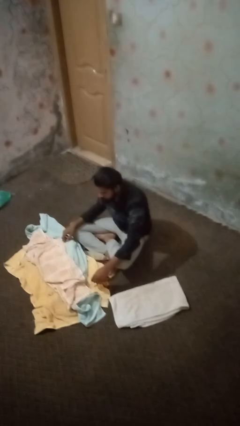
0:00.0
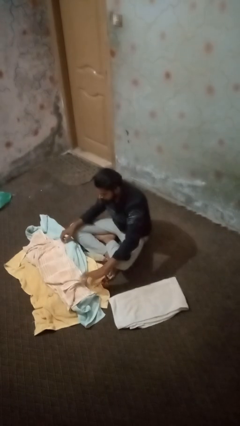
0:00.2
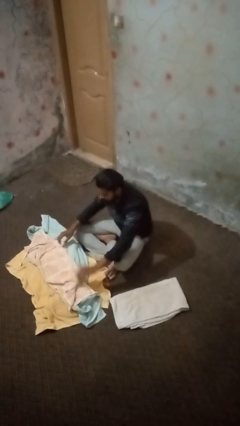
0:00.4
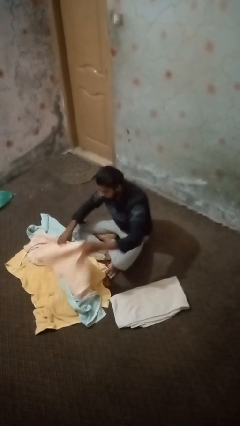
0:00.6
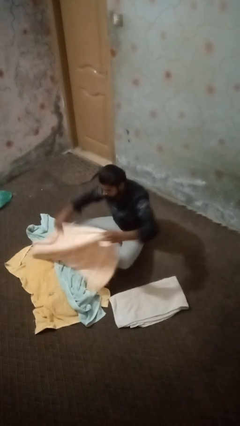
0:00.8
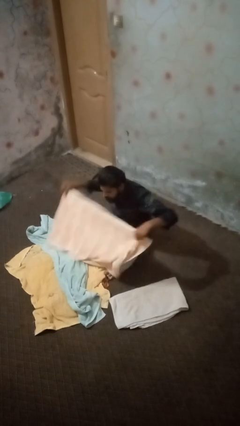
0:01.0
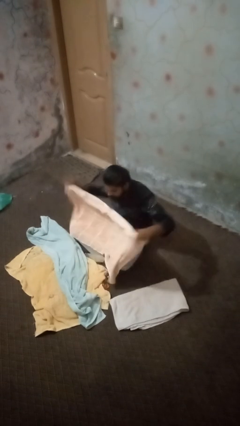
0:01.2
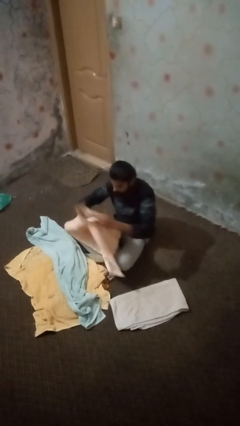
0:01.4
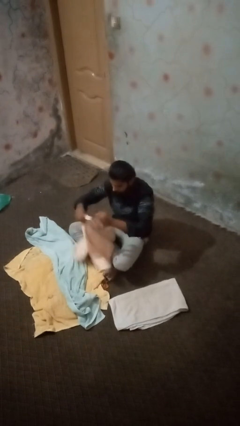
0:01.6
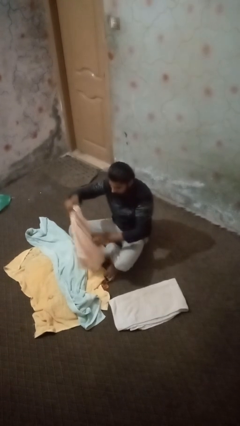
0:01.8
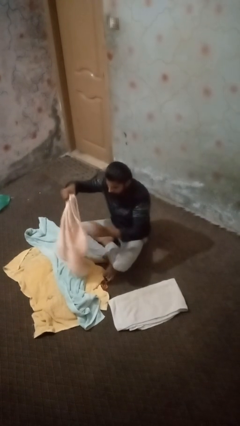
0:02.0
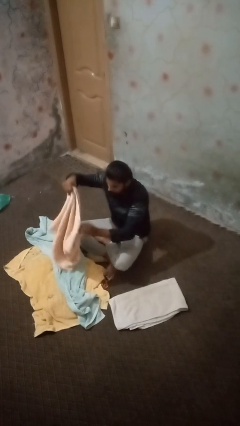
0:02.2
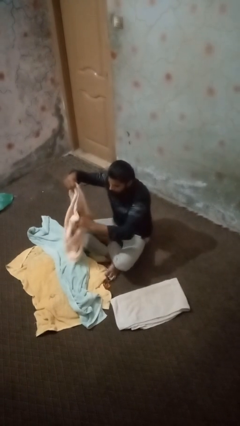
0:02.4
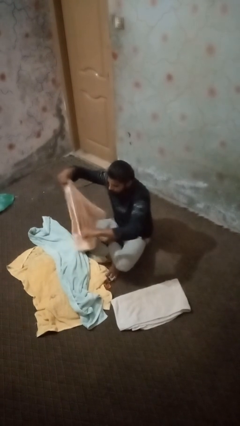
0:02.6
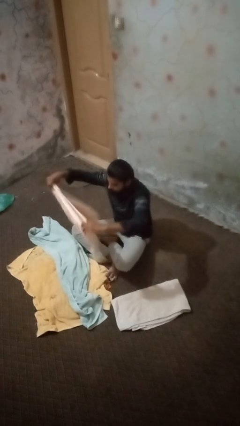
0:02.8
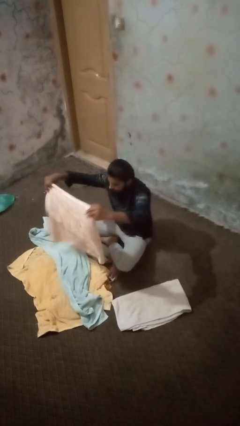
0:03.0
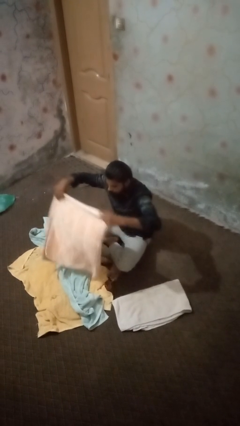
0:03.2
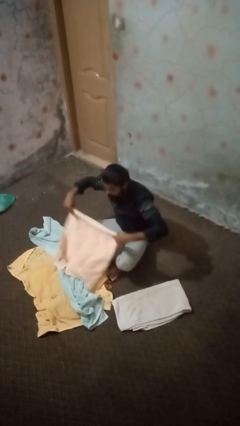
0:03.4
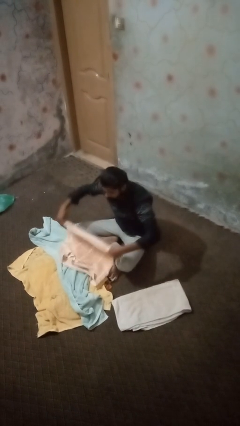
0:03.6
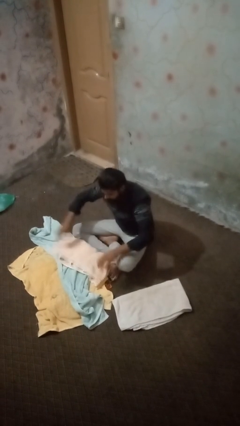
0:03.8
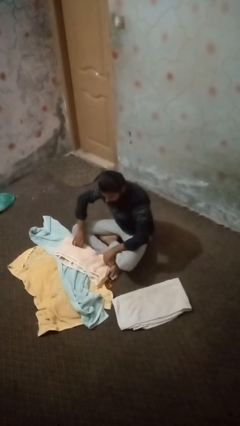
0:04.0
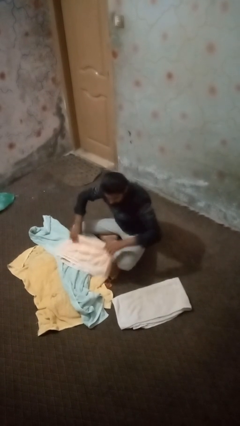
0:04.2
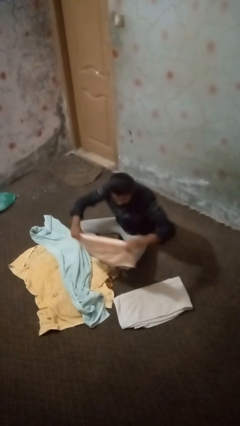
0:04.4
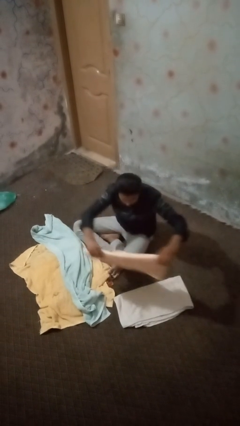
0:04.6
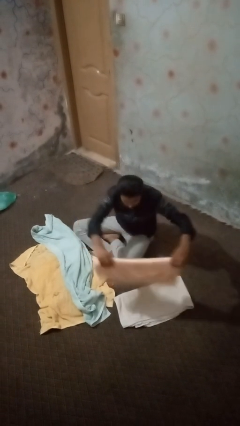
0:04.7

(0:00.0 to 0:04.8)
person folds towel

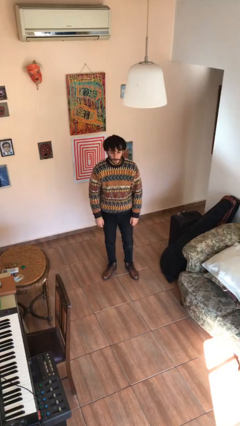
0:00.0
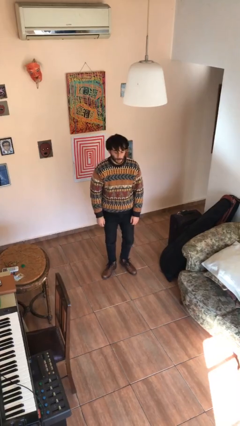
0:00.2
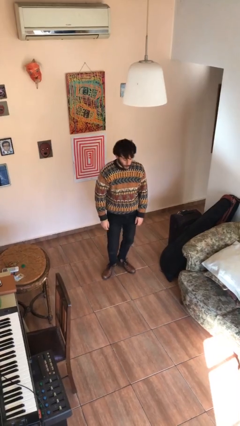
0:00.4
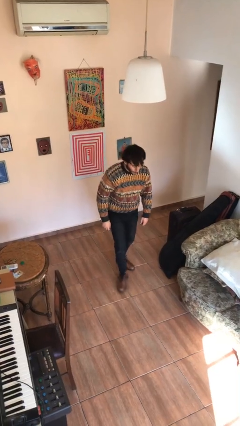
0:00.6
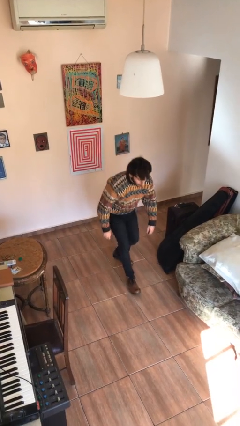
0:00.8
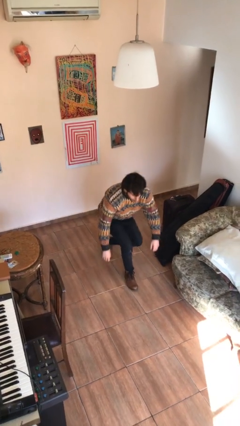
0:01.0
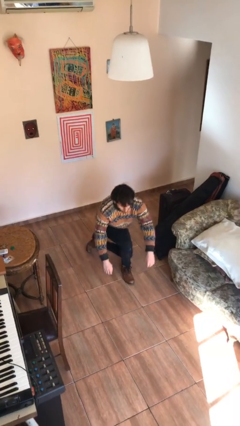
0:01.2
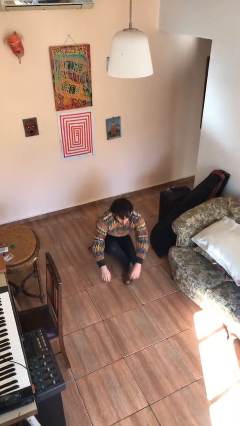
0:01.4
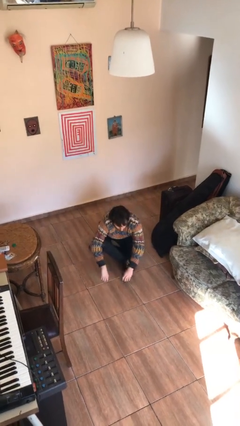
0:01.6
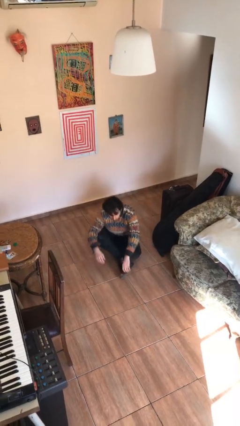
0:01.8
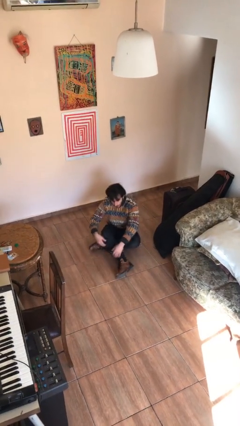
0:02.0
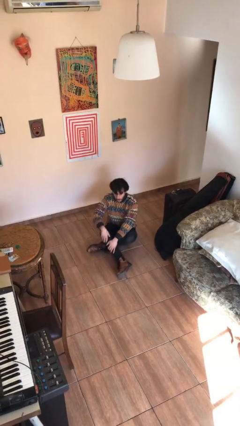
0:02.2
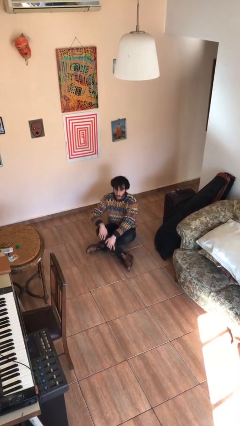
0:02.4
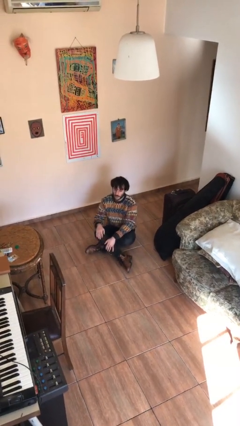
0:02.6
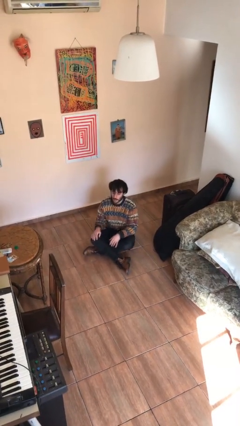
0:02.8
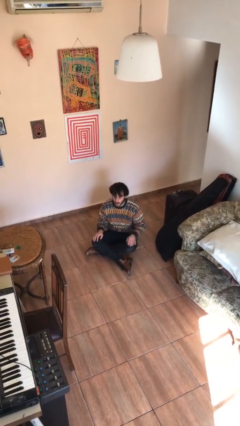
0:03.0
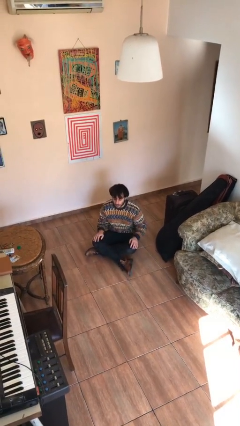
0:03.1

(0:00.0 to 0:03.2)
person sits crisscross

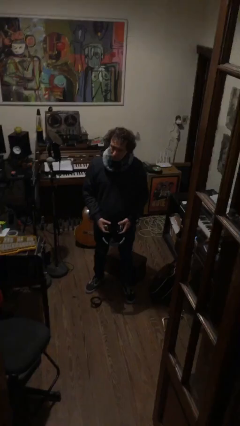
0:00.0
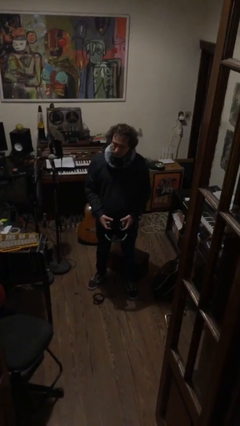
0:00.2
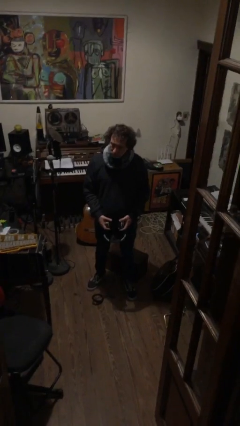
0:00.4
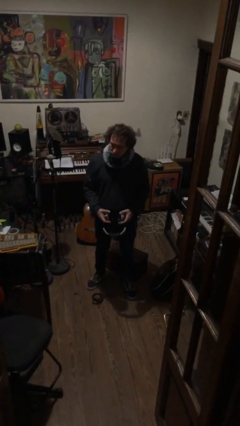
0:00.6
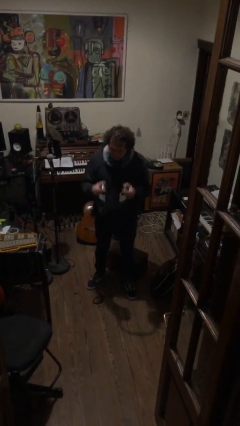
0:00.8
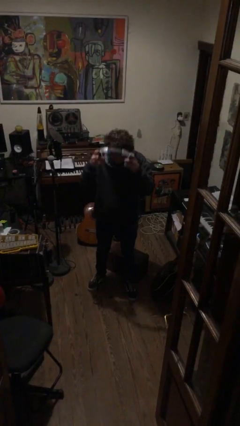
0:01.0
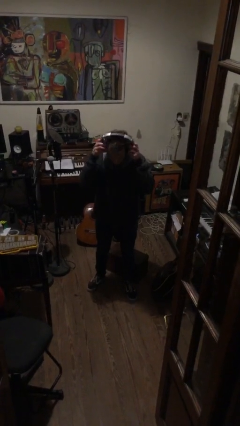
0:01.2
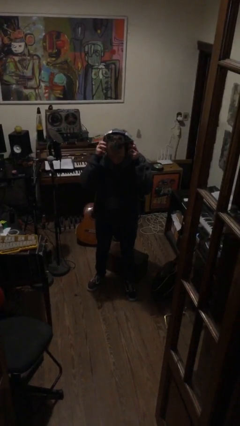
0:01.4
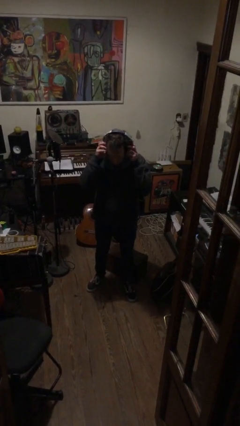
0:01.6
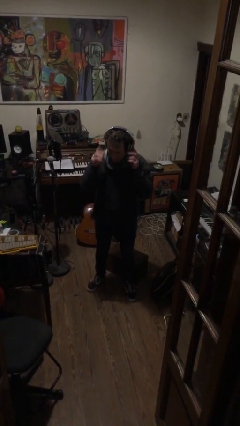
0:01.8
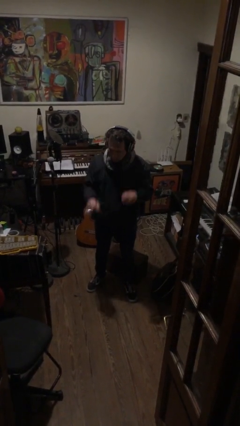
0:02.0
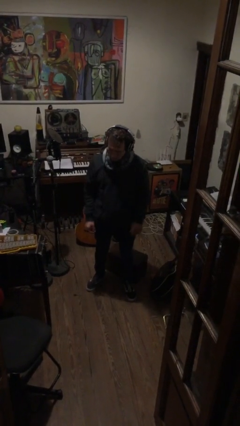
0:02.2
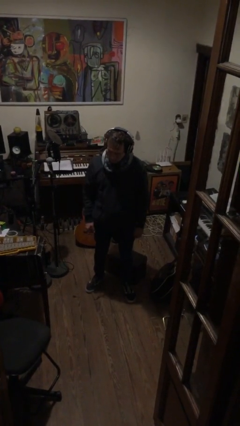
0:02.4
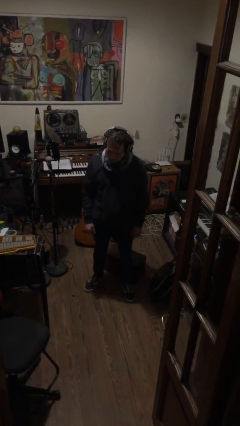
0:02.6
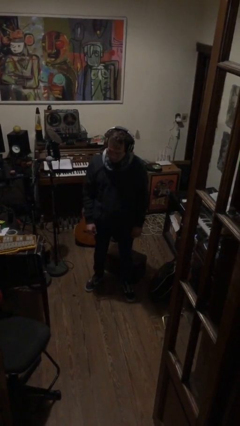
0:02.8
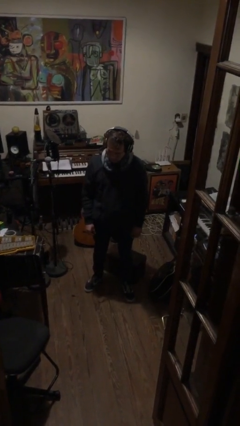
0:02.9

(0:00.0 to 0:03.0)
person puts on headphones

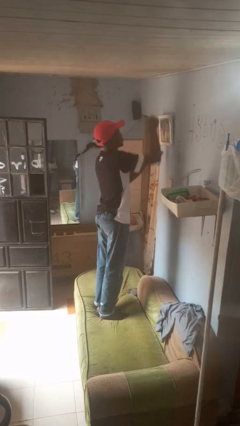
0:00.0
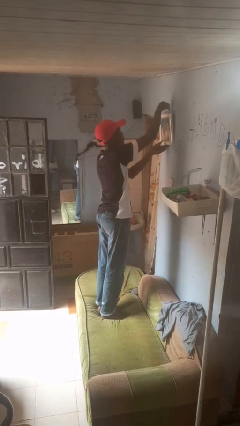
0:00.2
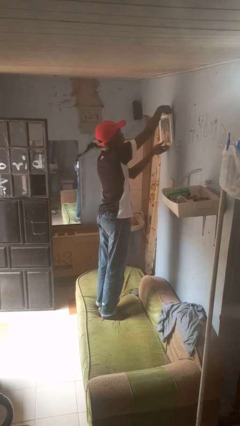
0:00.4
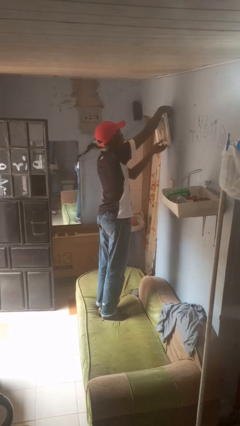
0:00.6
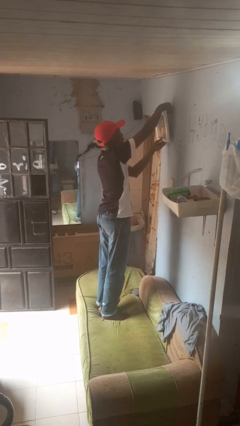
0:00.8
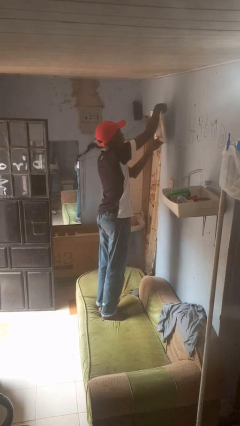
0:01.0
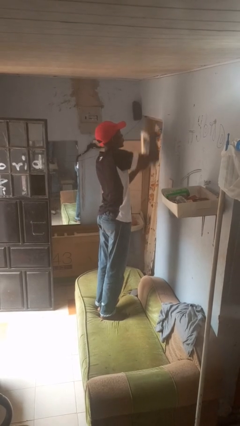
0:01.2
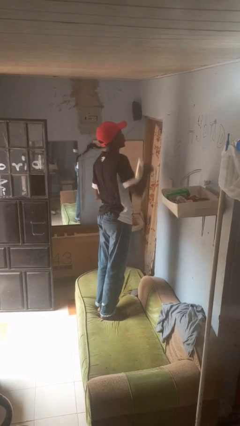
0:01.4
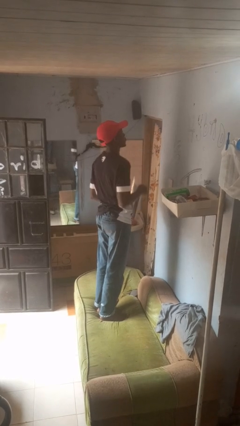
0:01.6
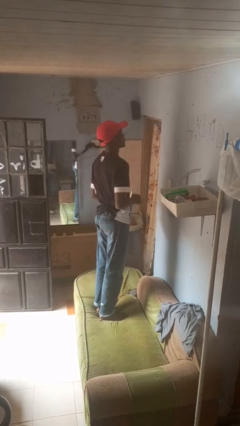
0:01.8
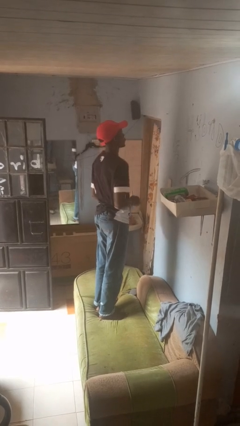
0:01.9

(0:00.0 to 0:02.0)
person takes down picture frame

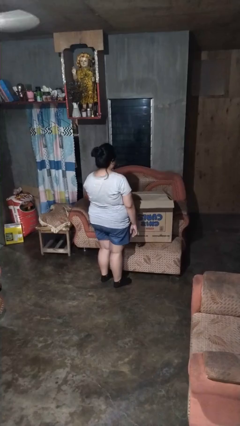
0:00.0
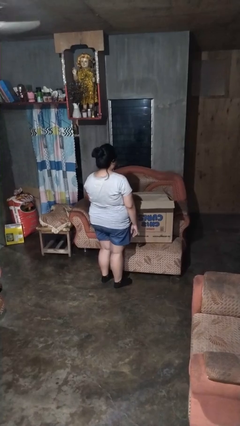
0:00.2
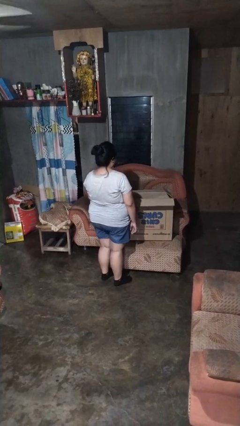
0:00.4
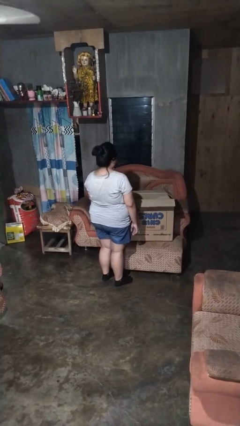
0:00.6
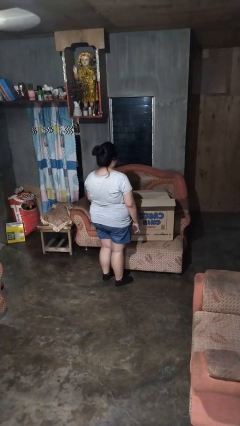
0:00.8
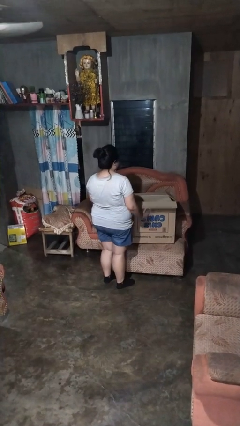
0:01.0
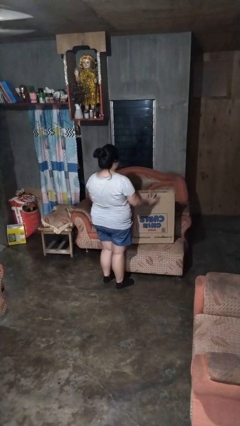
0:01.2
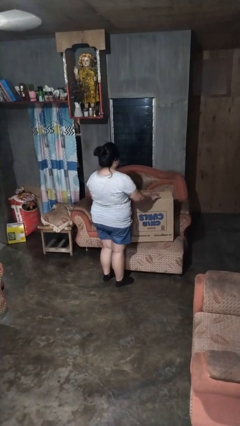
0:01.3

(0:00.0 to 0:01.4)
person closes box

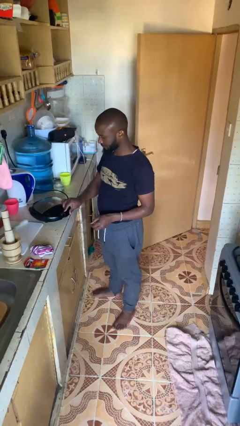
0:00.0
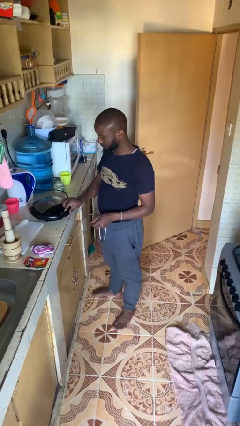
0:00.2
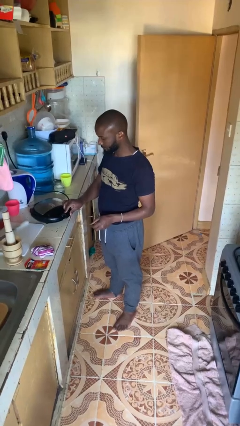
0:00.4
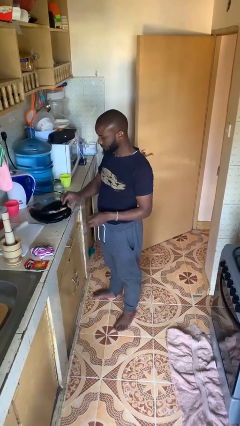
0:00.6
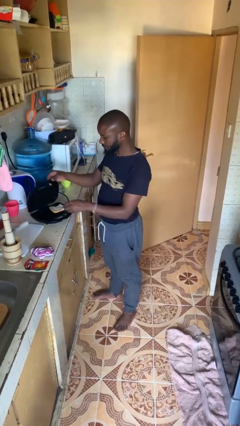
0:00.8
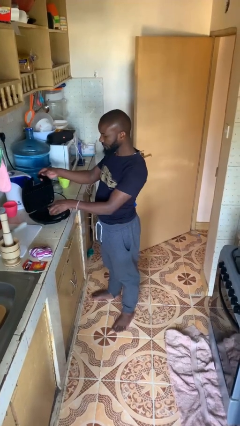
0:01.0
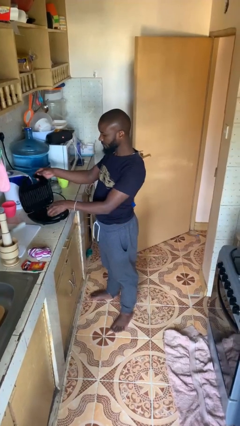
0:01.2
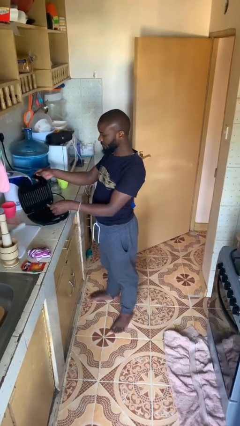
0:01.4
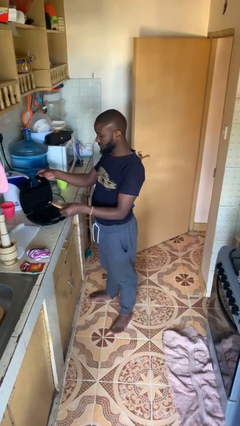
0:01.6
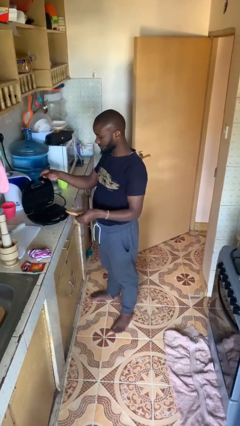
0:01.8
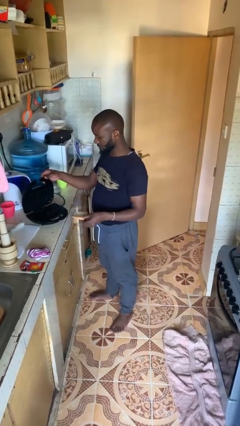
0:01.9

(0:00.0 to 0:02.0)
person takes object from toaster

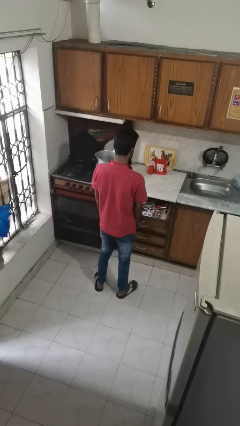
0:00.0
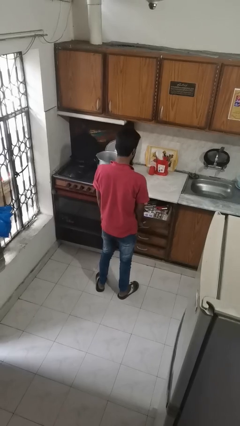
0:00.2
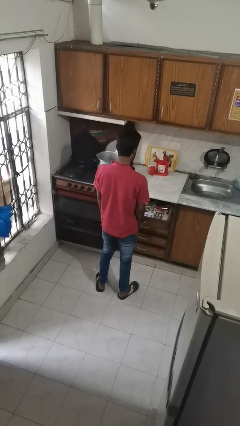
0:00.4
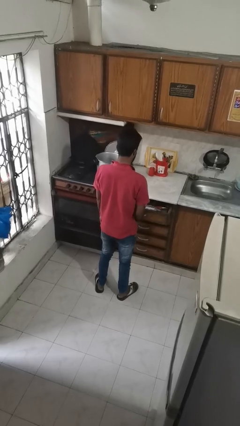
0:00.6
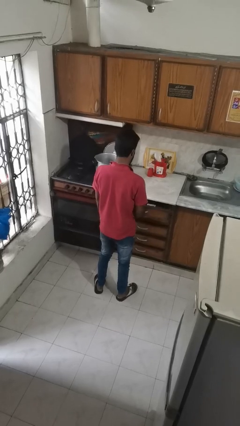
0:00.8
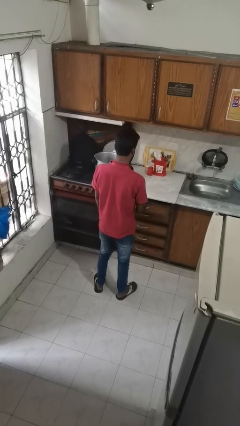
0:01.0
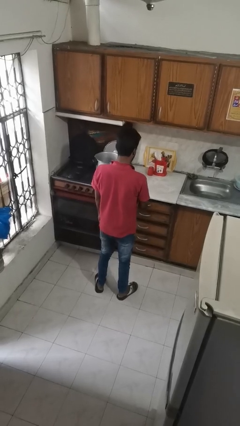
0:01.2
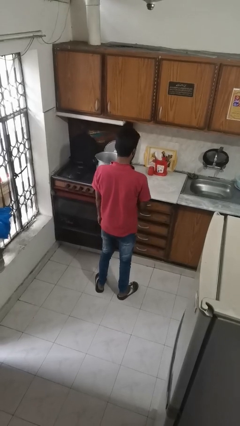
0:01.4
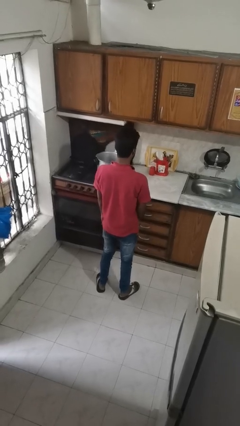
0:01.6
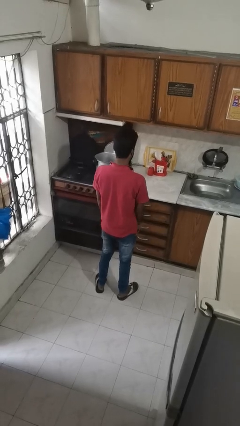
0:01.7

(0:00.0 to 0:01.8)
person closes kitchen drawer
